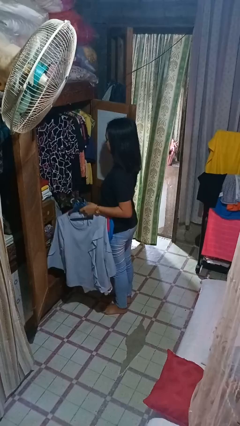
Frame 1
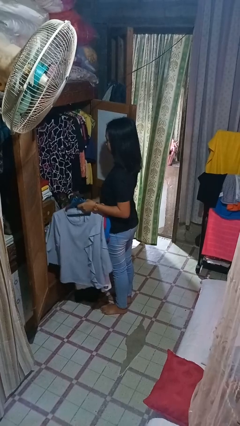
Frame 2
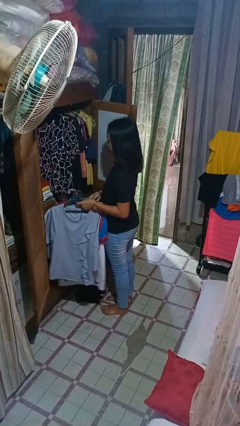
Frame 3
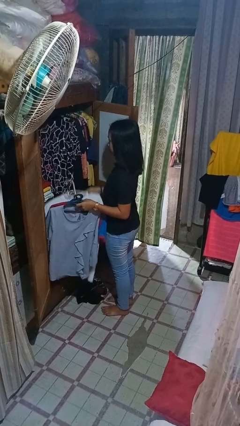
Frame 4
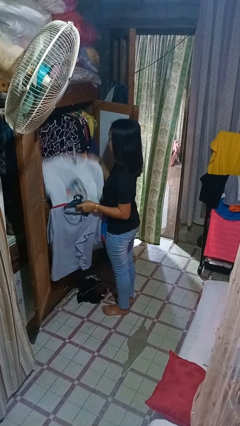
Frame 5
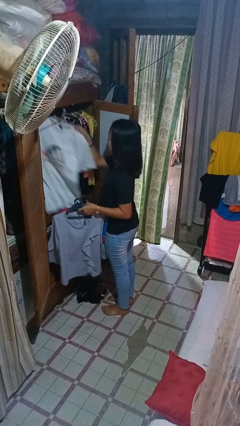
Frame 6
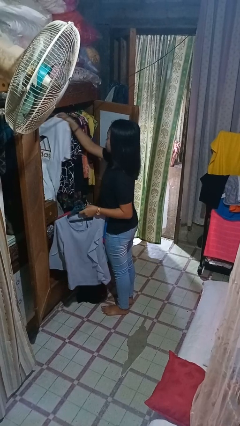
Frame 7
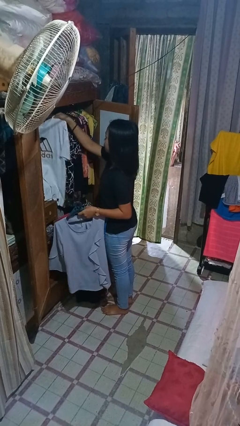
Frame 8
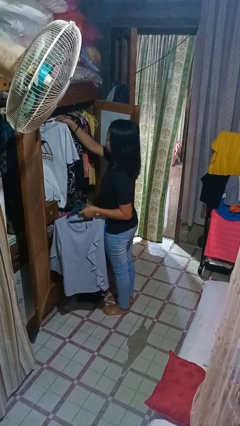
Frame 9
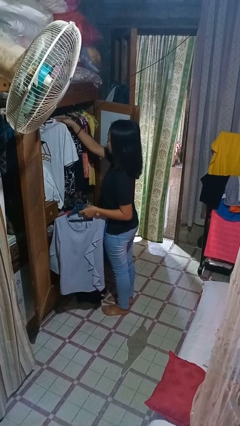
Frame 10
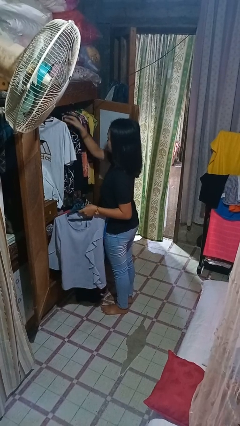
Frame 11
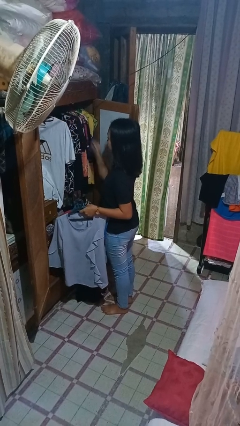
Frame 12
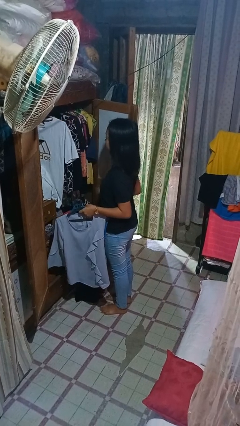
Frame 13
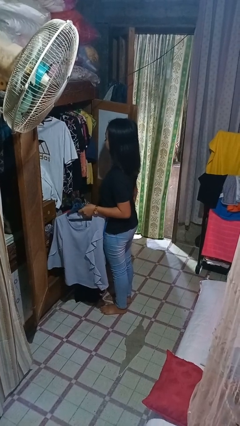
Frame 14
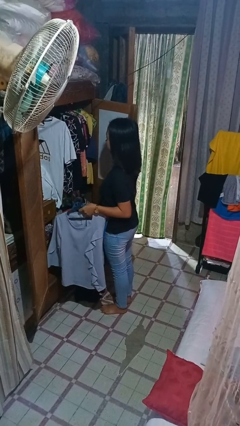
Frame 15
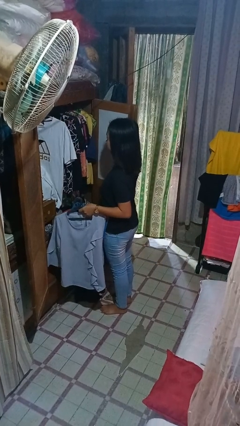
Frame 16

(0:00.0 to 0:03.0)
person puts clothes into closet

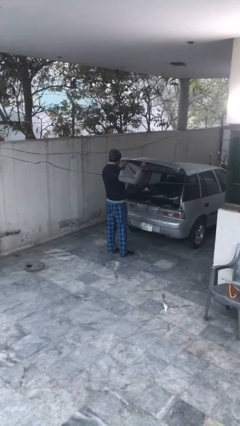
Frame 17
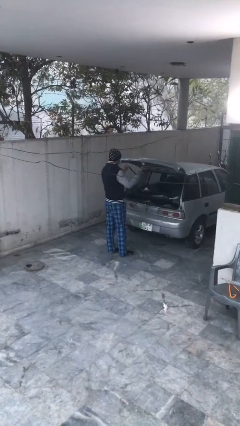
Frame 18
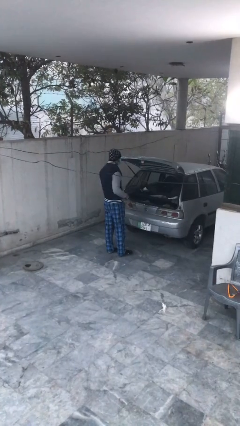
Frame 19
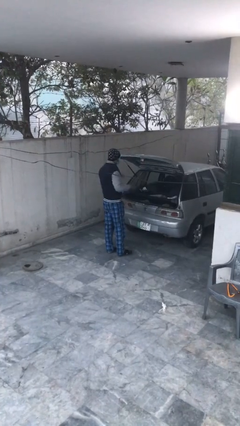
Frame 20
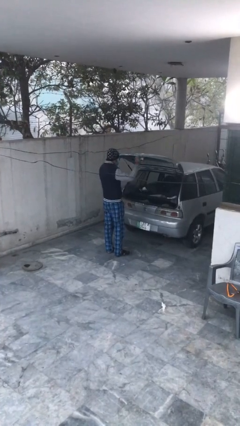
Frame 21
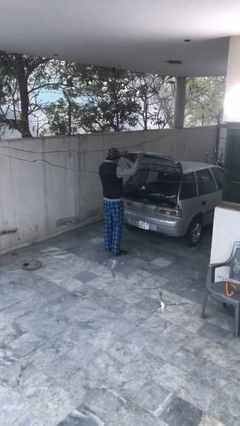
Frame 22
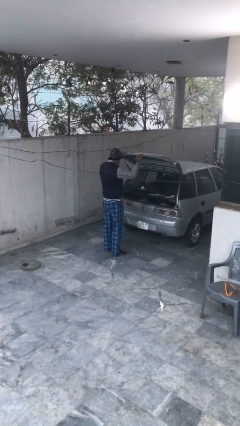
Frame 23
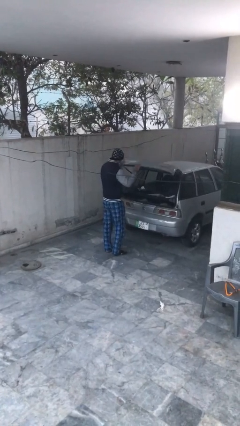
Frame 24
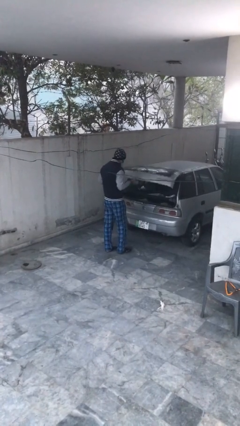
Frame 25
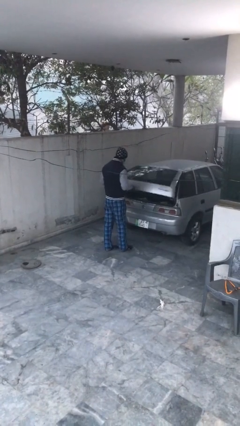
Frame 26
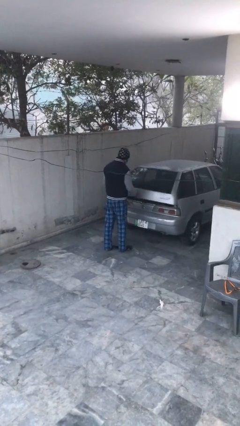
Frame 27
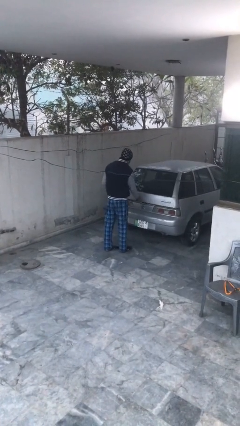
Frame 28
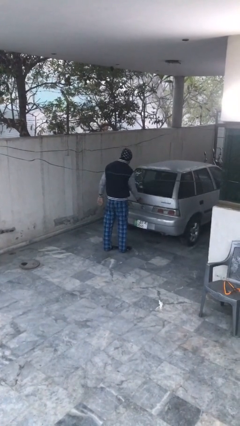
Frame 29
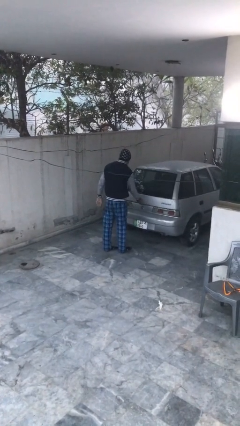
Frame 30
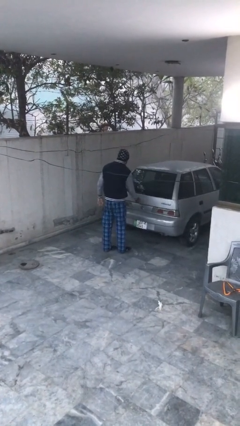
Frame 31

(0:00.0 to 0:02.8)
person closes car trunk

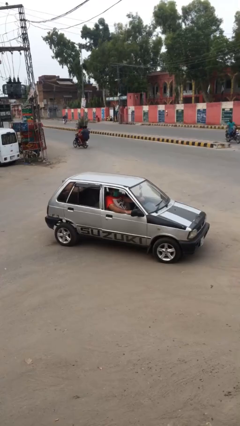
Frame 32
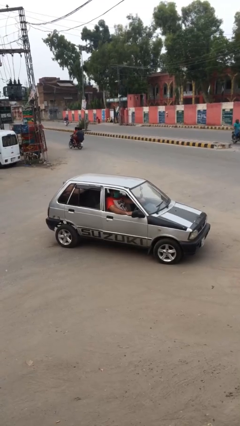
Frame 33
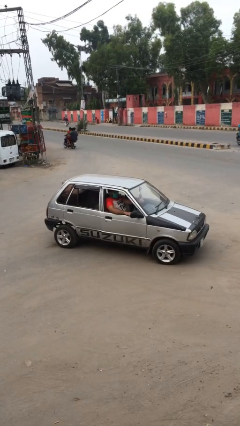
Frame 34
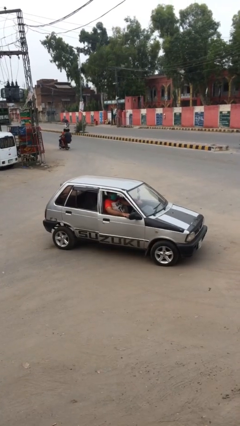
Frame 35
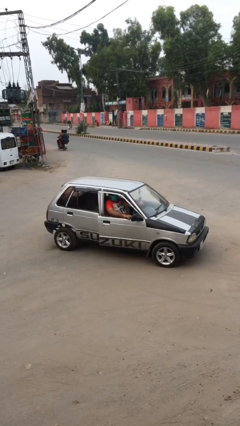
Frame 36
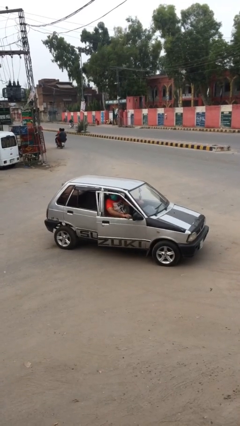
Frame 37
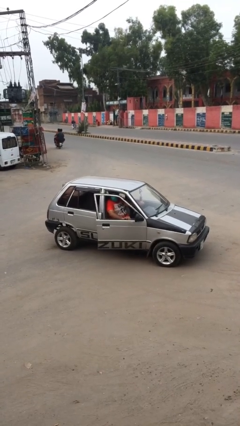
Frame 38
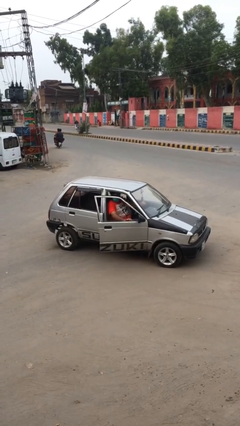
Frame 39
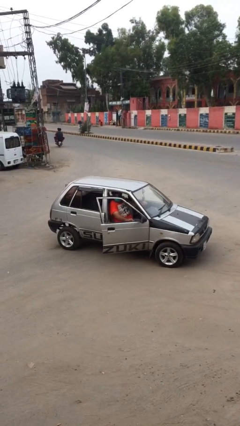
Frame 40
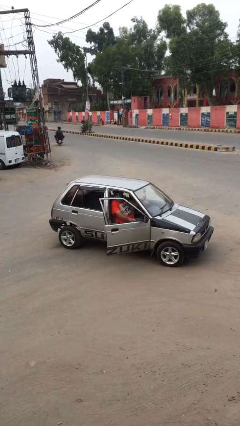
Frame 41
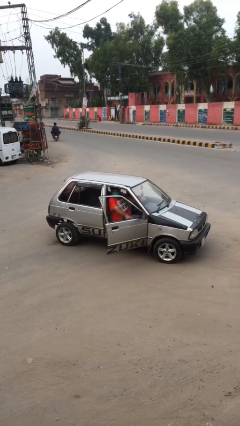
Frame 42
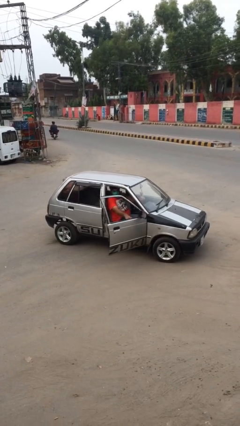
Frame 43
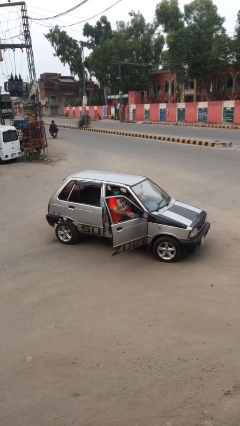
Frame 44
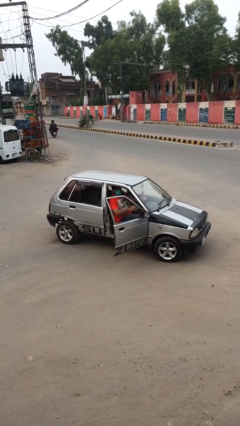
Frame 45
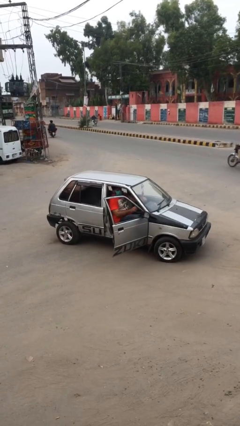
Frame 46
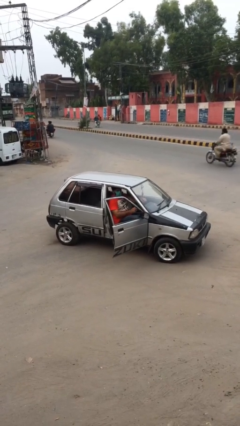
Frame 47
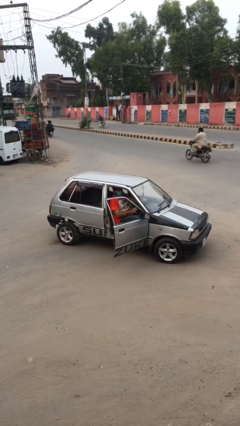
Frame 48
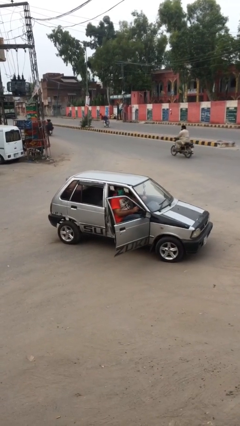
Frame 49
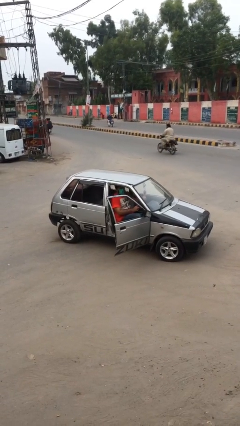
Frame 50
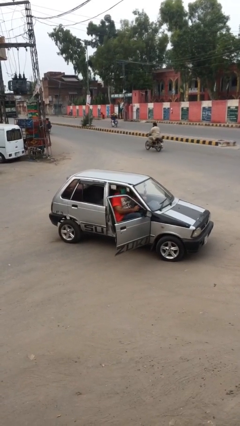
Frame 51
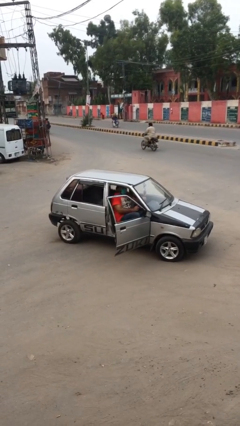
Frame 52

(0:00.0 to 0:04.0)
person opens car door

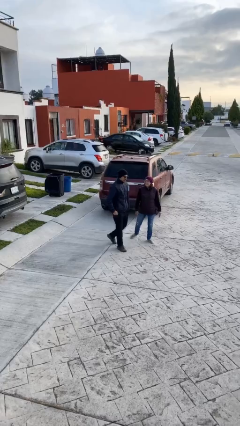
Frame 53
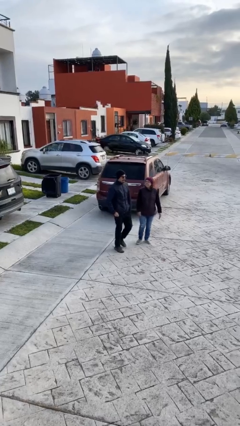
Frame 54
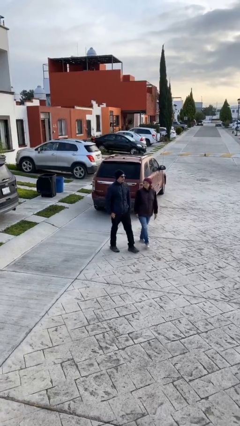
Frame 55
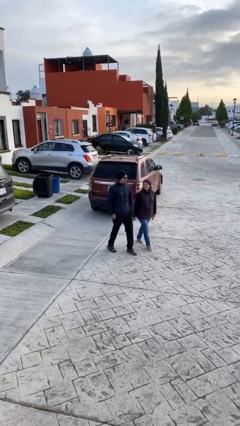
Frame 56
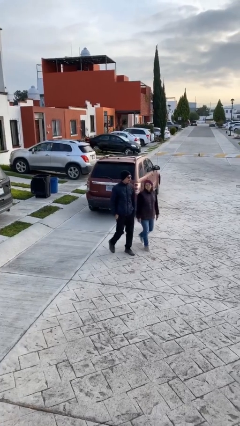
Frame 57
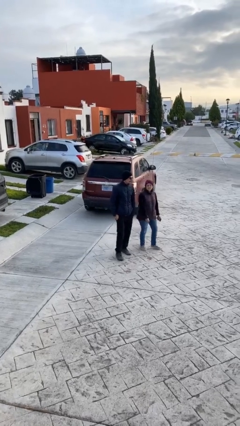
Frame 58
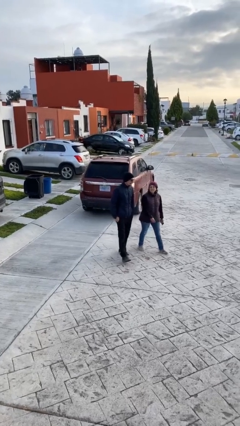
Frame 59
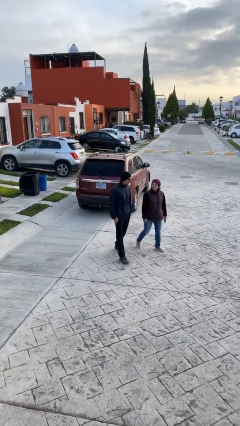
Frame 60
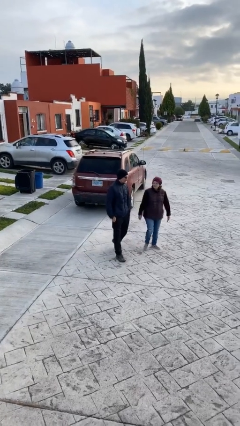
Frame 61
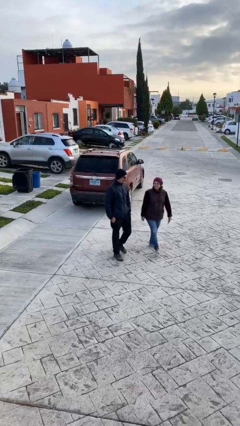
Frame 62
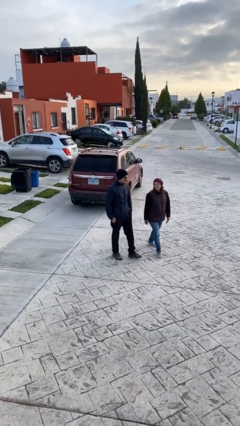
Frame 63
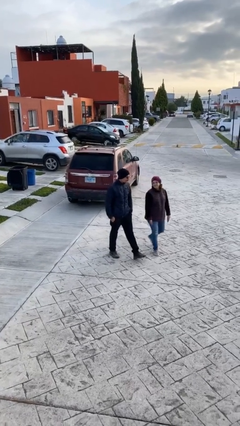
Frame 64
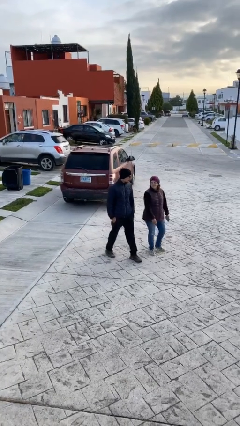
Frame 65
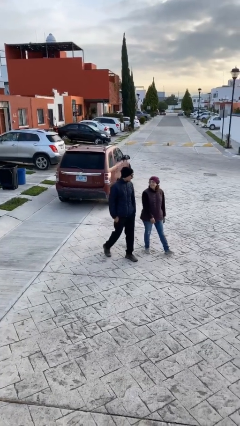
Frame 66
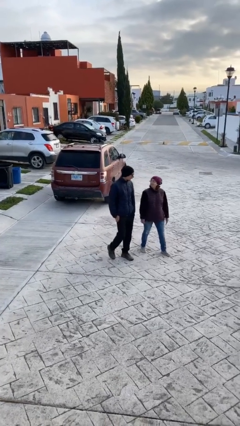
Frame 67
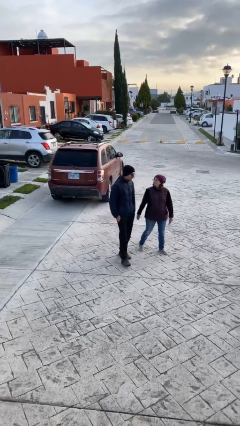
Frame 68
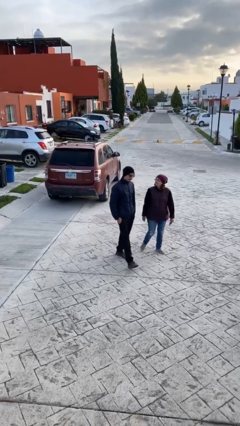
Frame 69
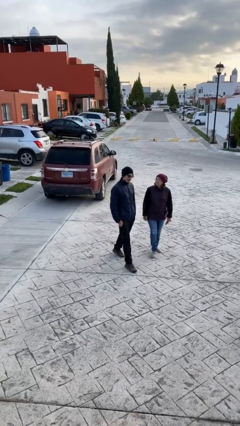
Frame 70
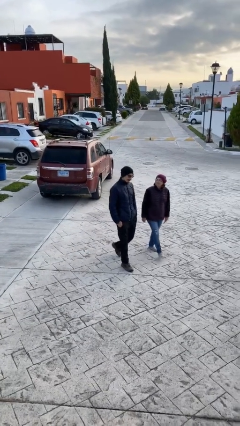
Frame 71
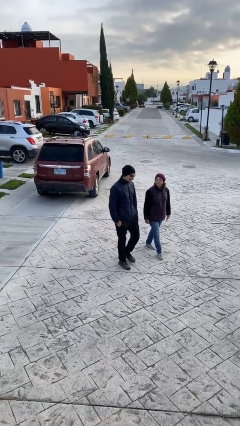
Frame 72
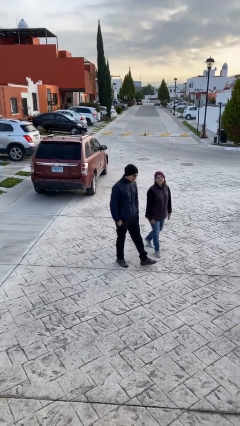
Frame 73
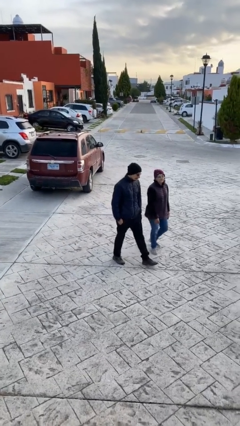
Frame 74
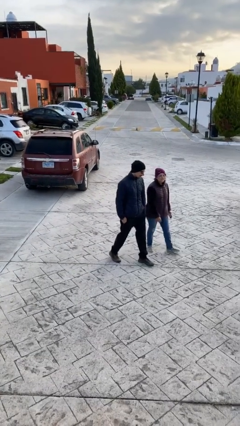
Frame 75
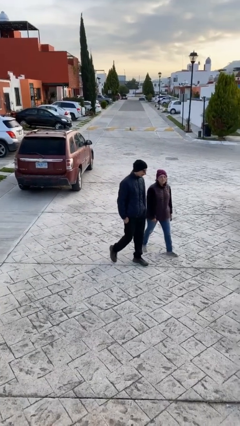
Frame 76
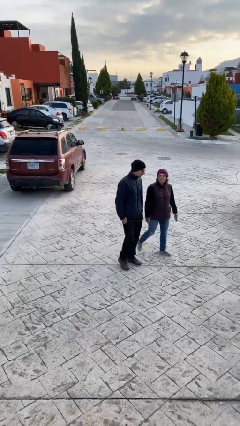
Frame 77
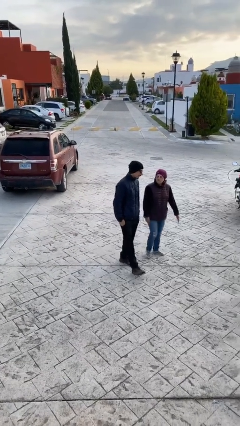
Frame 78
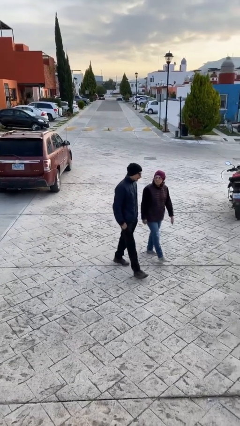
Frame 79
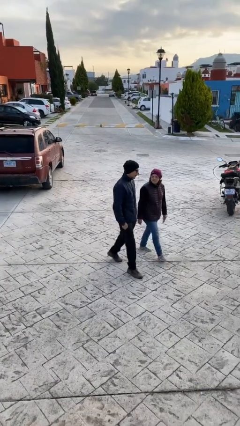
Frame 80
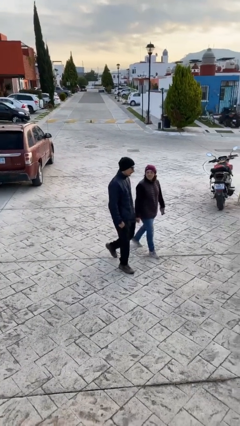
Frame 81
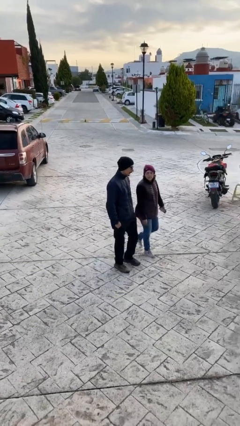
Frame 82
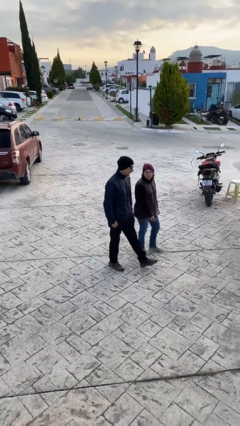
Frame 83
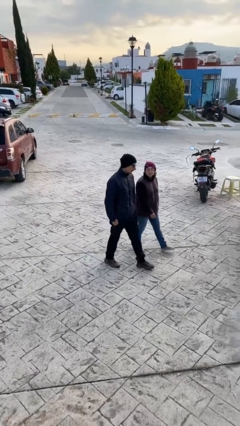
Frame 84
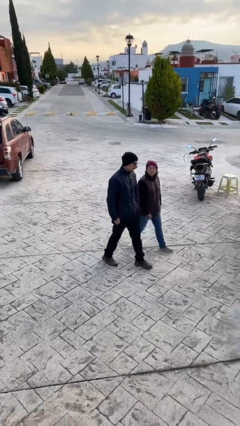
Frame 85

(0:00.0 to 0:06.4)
person talks to person

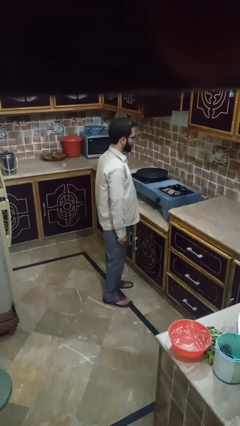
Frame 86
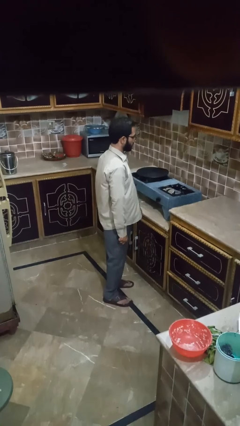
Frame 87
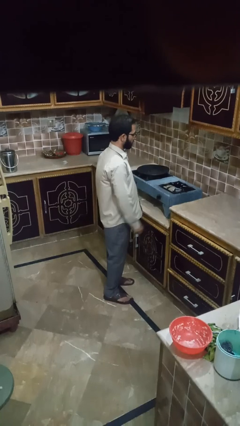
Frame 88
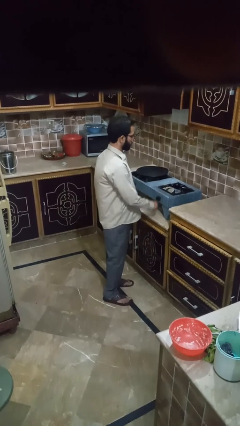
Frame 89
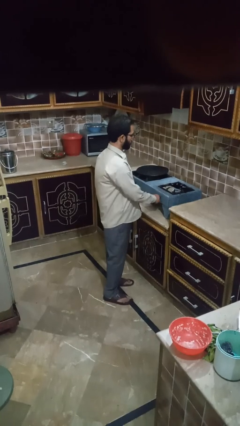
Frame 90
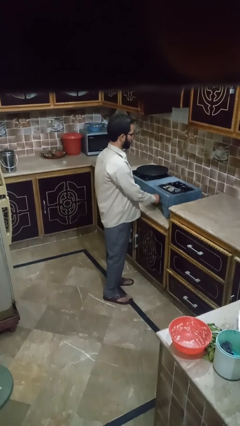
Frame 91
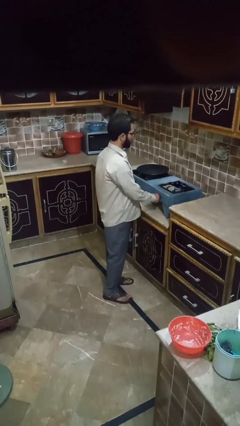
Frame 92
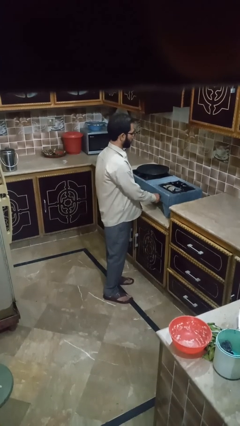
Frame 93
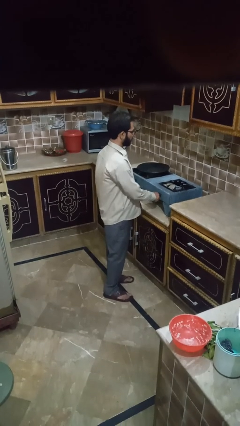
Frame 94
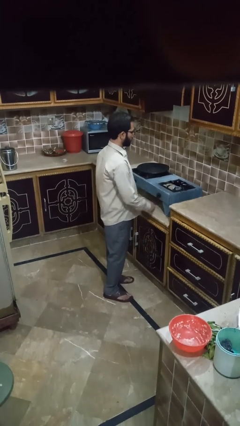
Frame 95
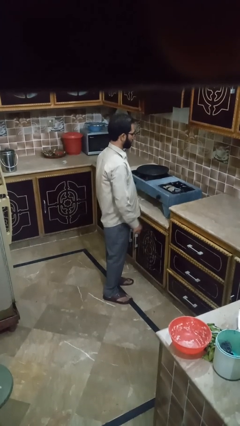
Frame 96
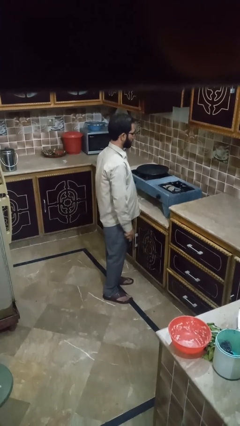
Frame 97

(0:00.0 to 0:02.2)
person turns off stovetop
